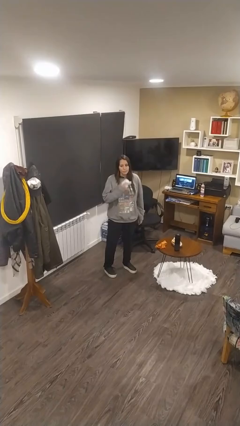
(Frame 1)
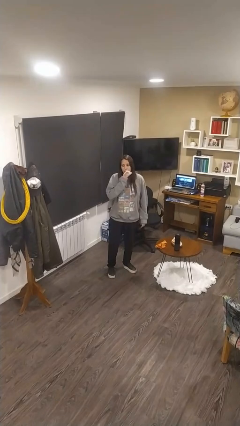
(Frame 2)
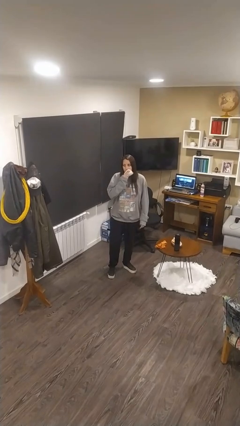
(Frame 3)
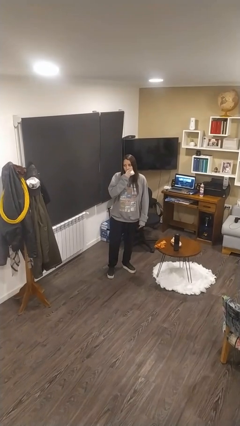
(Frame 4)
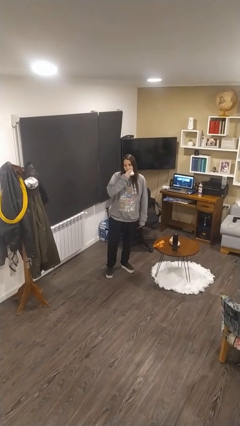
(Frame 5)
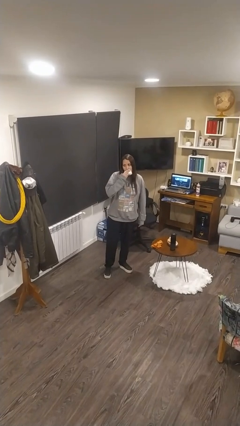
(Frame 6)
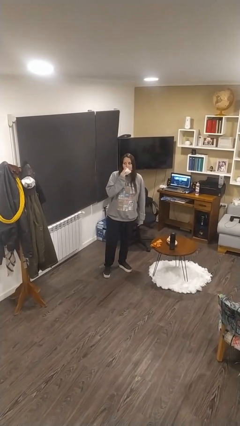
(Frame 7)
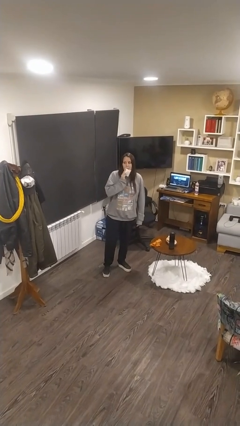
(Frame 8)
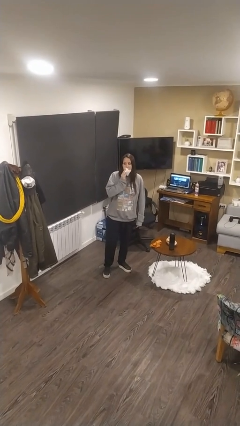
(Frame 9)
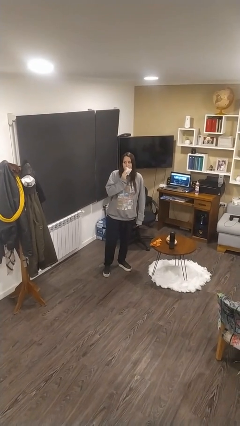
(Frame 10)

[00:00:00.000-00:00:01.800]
person wipes mouth with napkin

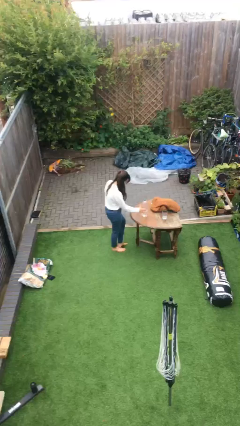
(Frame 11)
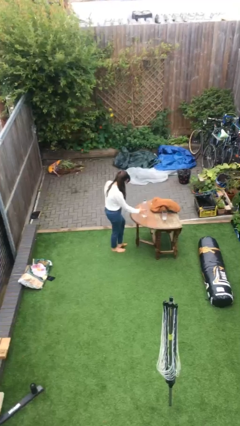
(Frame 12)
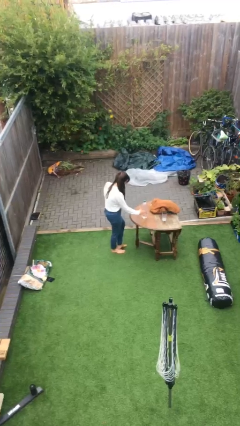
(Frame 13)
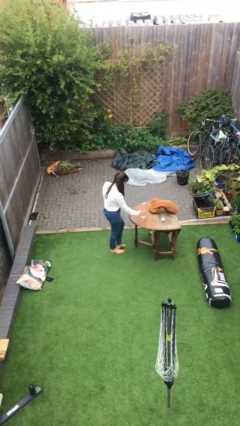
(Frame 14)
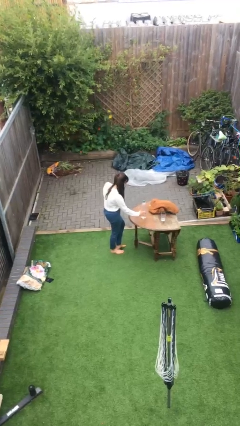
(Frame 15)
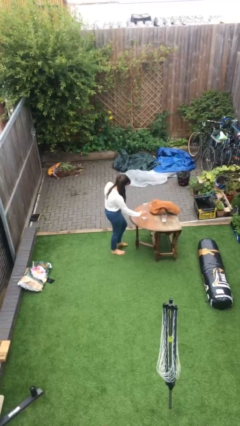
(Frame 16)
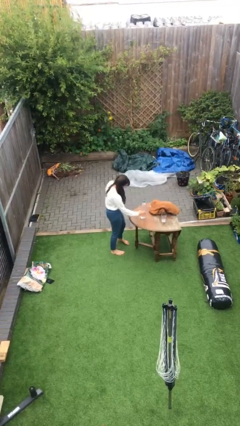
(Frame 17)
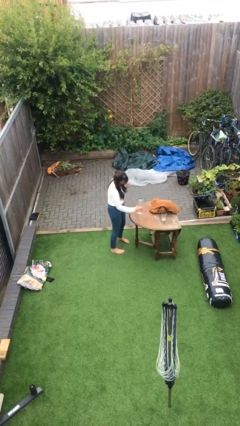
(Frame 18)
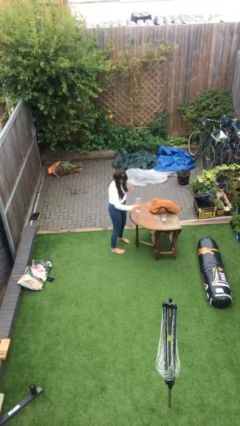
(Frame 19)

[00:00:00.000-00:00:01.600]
person picks up object from table

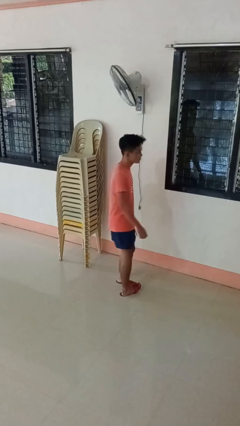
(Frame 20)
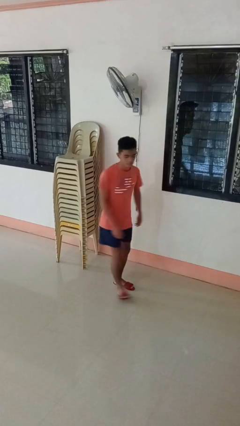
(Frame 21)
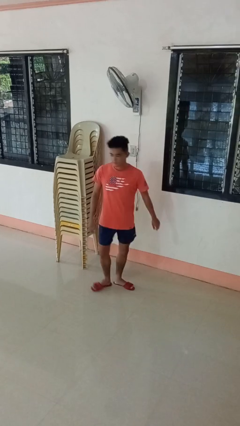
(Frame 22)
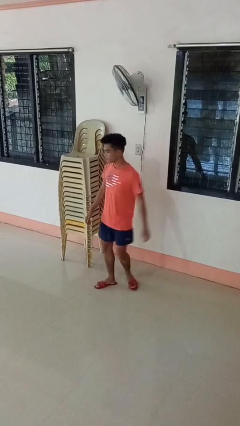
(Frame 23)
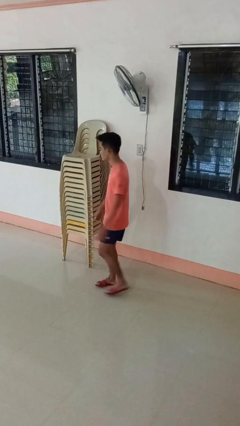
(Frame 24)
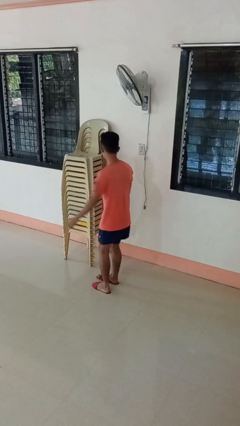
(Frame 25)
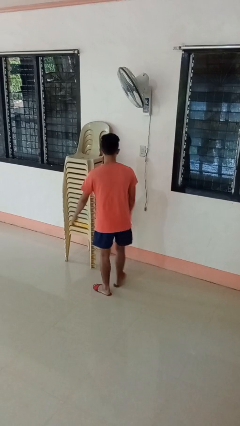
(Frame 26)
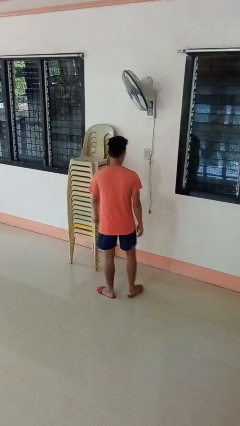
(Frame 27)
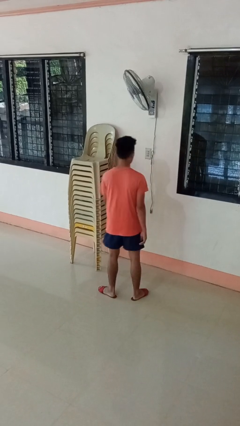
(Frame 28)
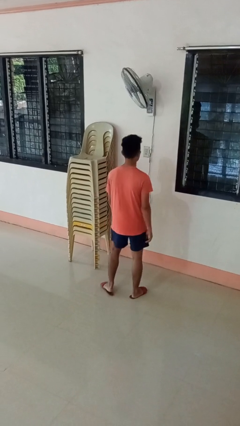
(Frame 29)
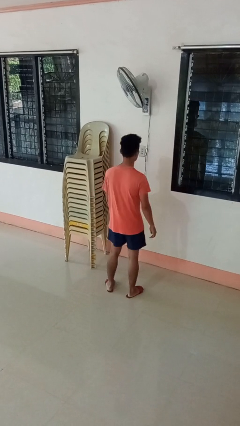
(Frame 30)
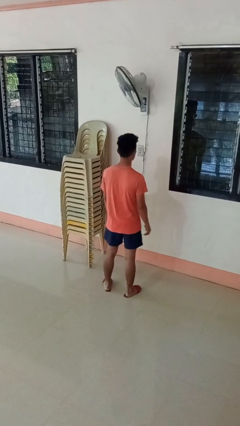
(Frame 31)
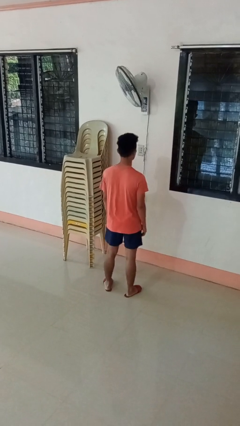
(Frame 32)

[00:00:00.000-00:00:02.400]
person twirls

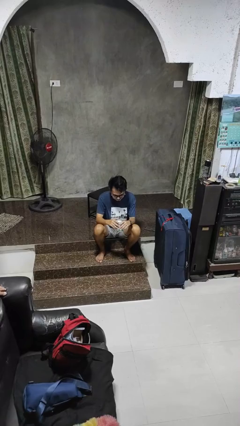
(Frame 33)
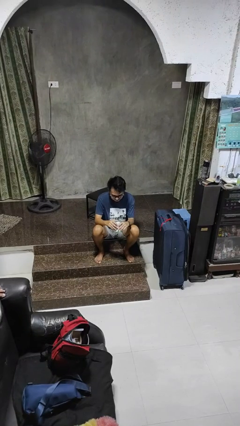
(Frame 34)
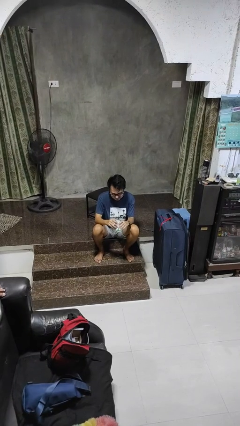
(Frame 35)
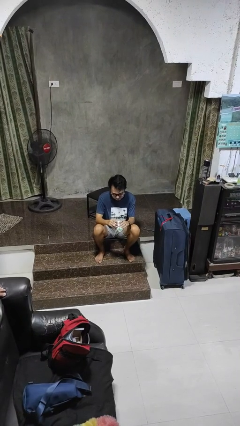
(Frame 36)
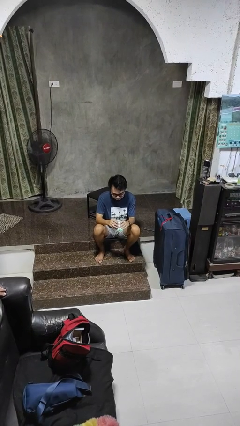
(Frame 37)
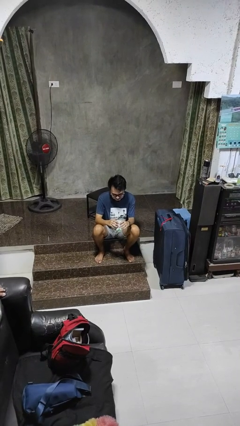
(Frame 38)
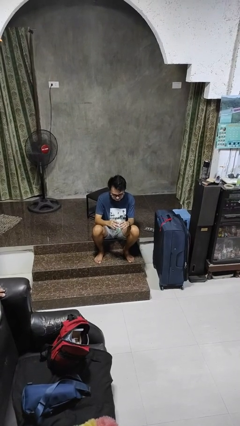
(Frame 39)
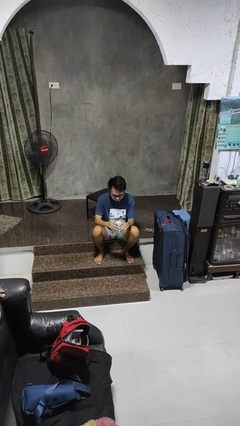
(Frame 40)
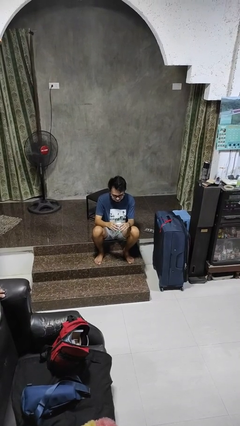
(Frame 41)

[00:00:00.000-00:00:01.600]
person opens beverage can

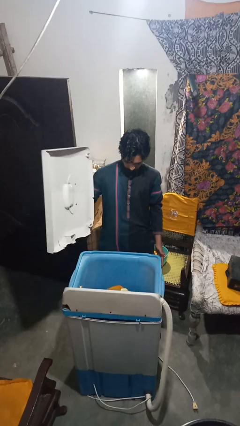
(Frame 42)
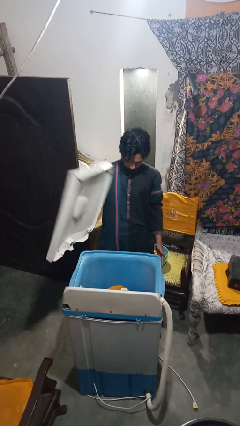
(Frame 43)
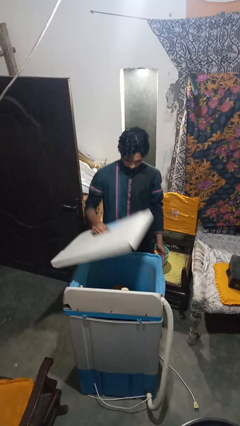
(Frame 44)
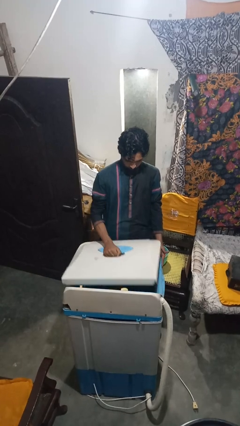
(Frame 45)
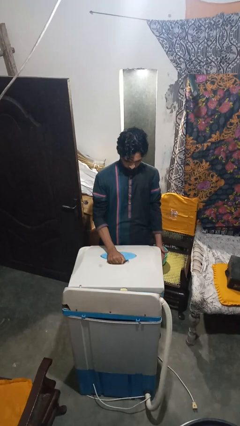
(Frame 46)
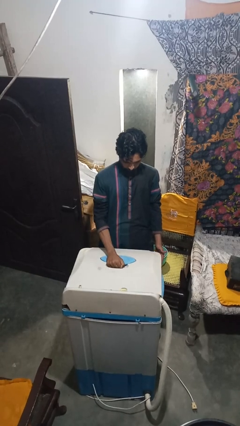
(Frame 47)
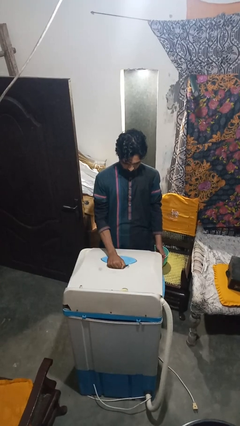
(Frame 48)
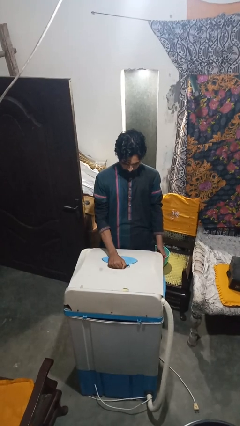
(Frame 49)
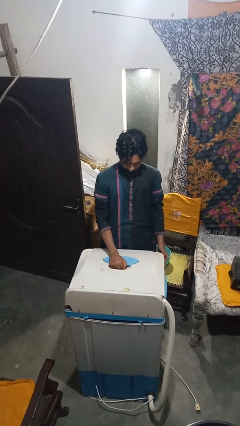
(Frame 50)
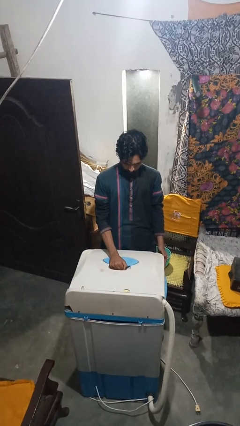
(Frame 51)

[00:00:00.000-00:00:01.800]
person closes clothes washer

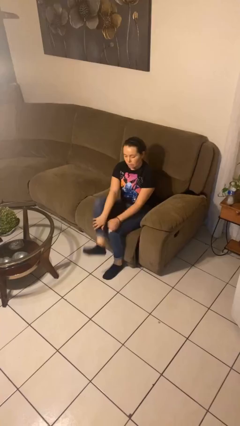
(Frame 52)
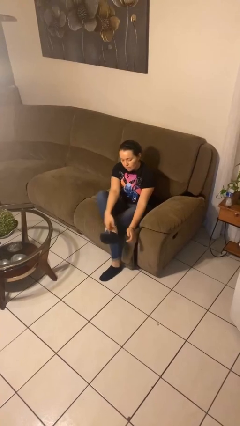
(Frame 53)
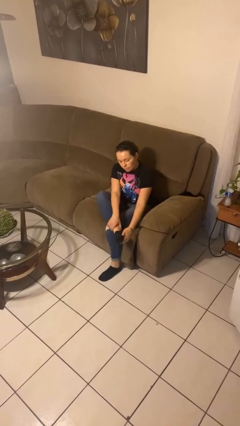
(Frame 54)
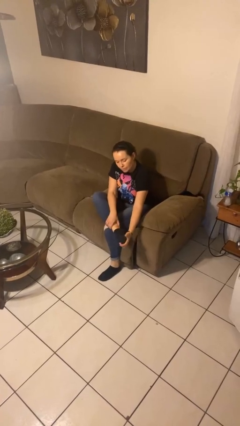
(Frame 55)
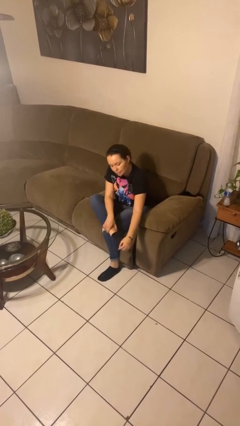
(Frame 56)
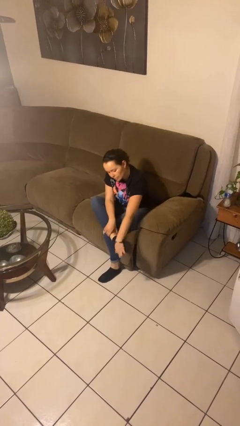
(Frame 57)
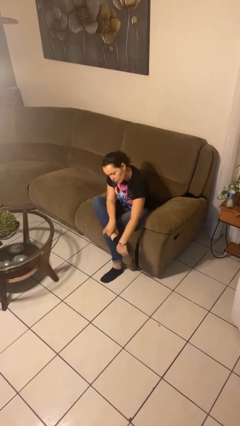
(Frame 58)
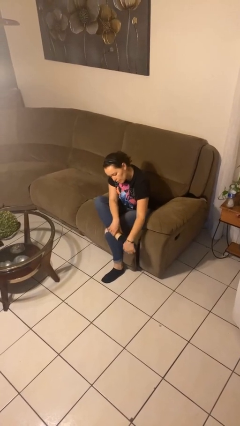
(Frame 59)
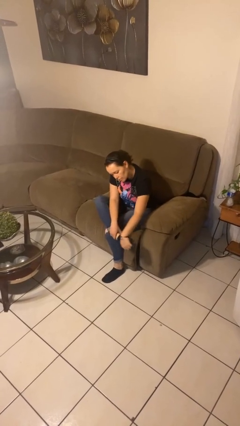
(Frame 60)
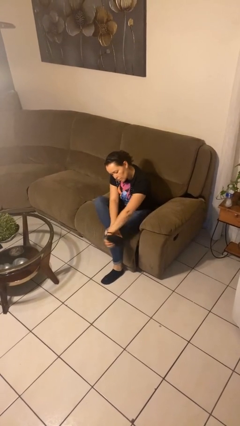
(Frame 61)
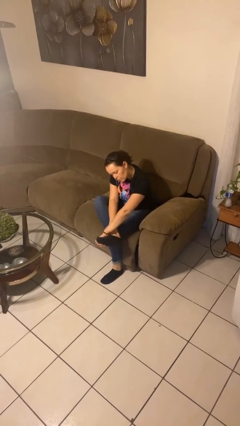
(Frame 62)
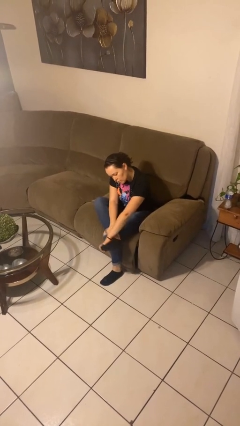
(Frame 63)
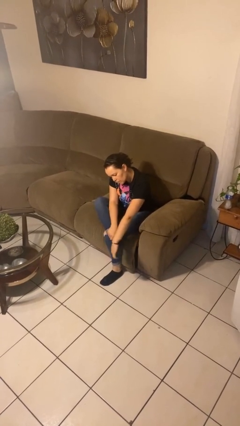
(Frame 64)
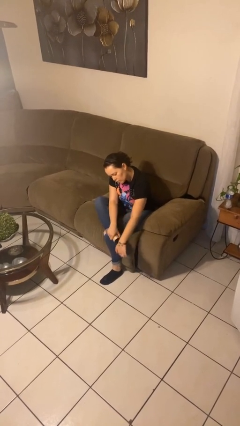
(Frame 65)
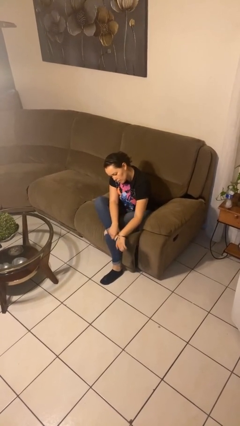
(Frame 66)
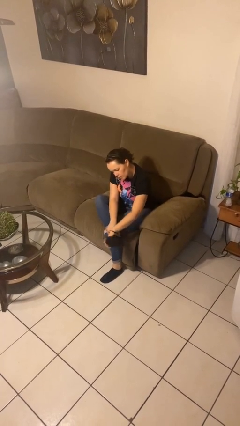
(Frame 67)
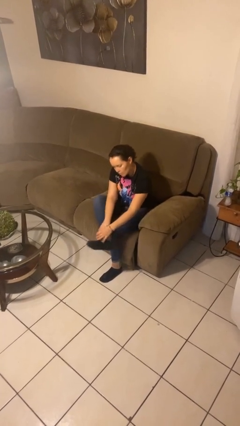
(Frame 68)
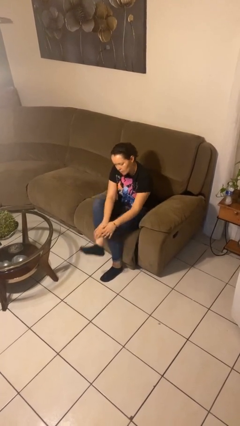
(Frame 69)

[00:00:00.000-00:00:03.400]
person rubs foot

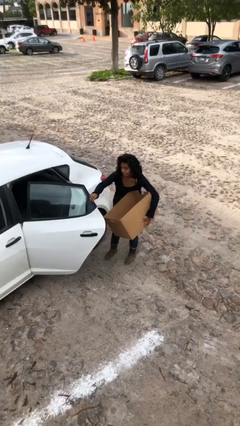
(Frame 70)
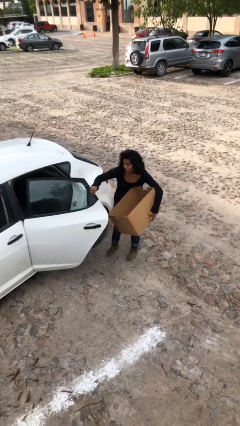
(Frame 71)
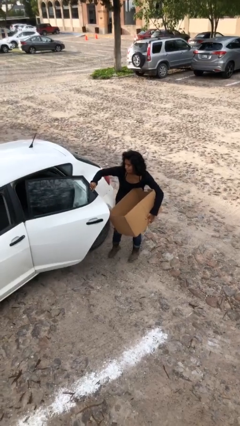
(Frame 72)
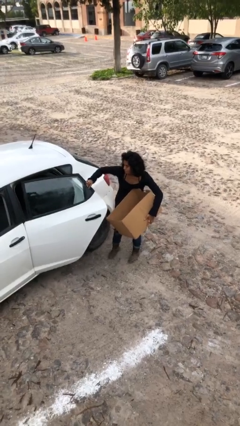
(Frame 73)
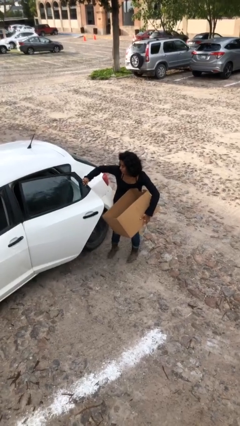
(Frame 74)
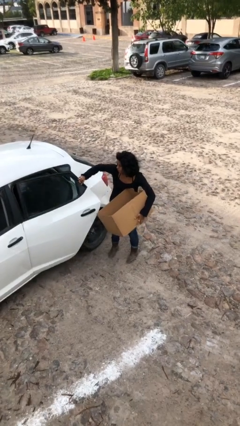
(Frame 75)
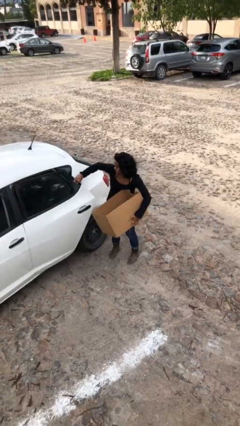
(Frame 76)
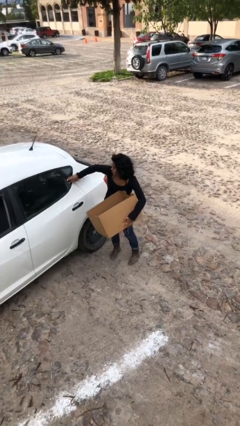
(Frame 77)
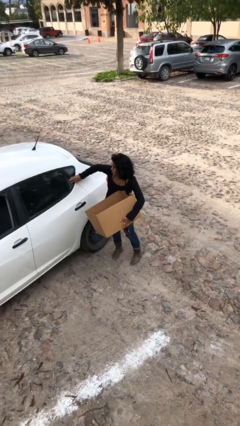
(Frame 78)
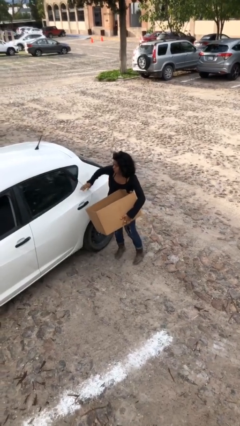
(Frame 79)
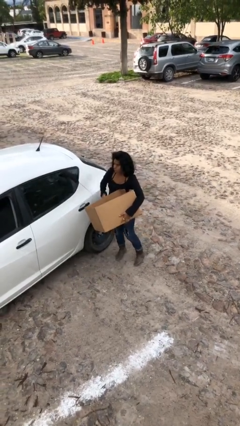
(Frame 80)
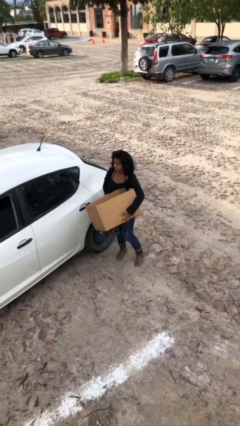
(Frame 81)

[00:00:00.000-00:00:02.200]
person closes car door

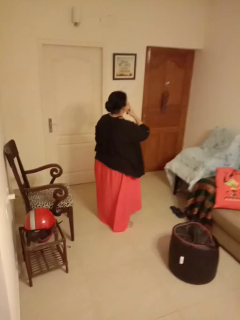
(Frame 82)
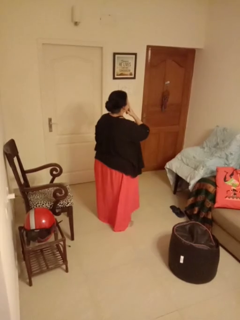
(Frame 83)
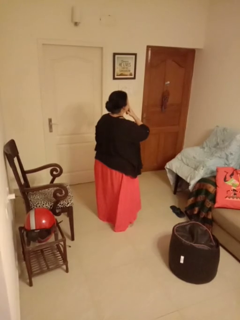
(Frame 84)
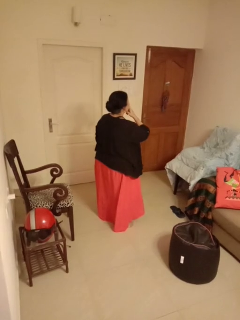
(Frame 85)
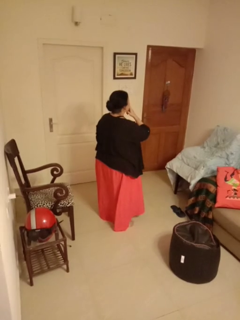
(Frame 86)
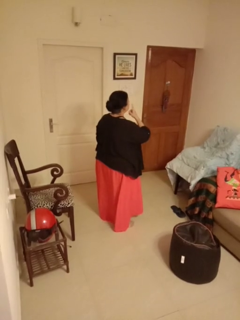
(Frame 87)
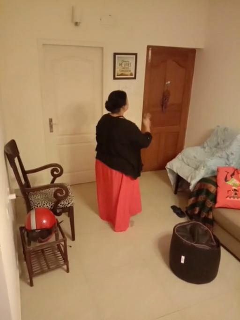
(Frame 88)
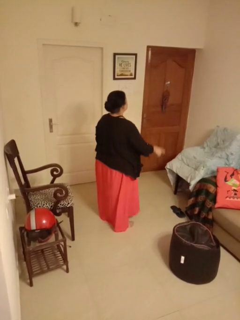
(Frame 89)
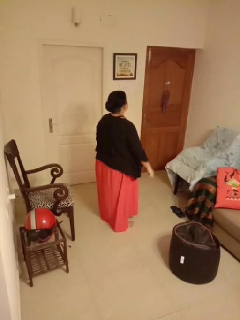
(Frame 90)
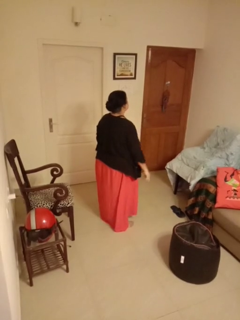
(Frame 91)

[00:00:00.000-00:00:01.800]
person gestures be quiet

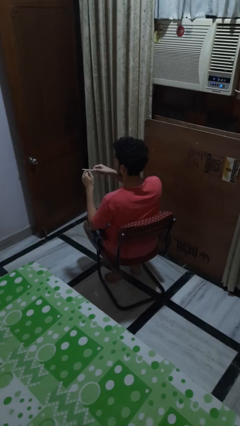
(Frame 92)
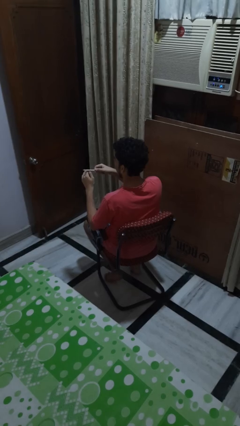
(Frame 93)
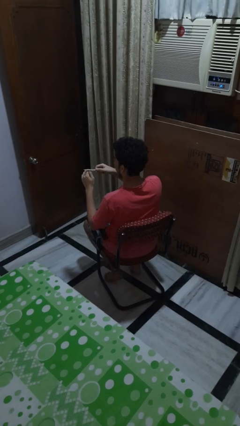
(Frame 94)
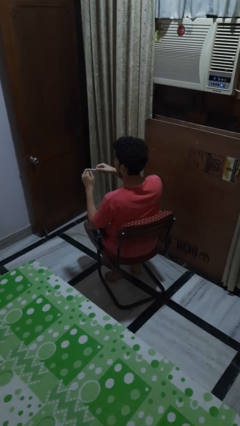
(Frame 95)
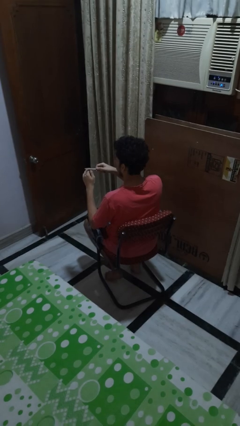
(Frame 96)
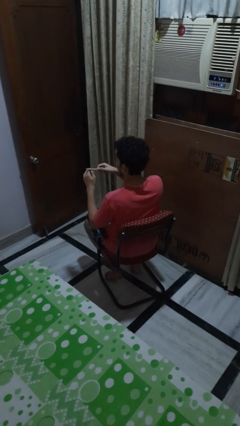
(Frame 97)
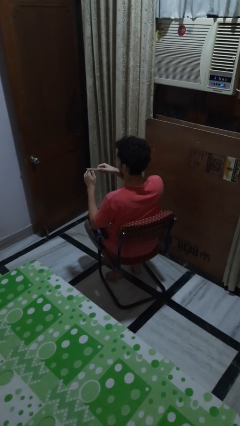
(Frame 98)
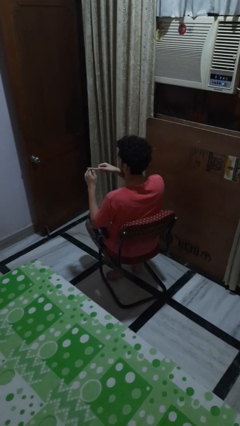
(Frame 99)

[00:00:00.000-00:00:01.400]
person files fingernails
